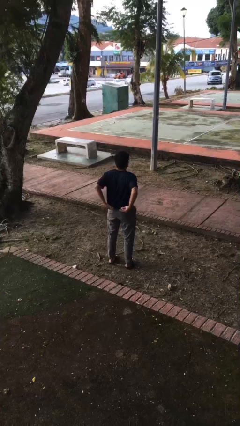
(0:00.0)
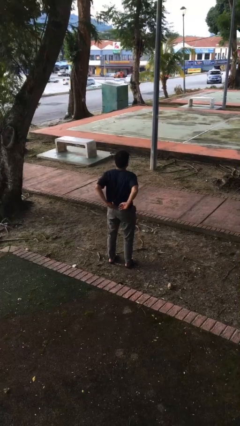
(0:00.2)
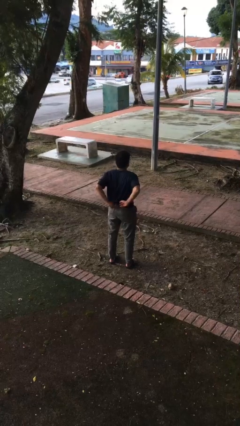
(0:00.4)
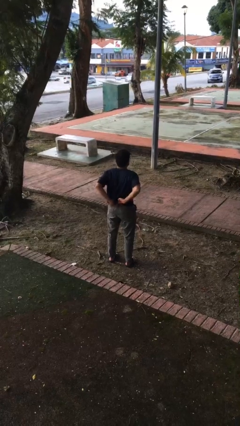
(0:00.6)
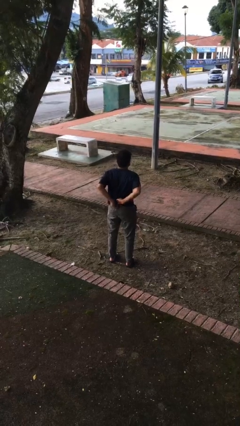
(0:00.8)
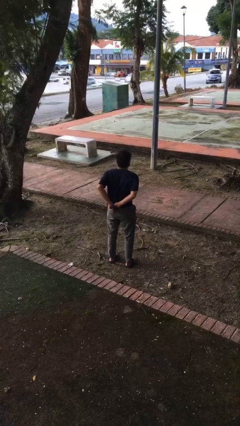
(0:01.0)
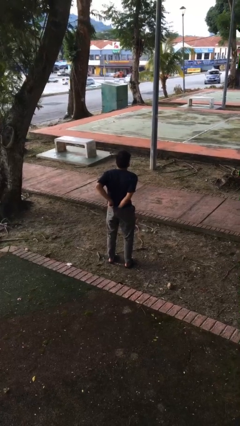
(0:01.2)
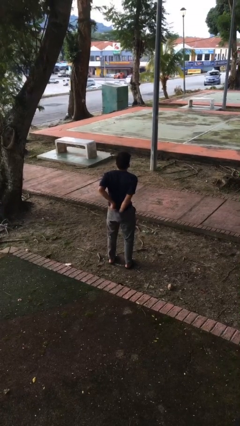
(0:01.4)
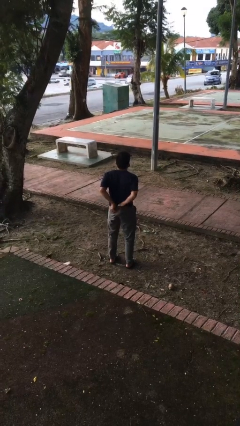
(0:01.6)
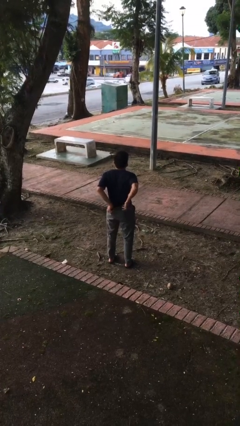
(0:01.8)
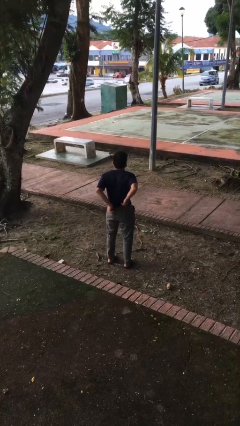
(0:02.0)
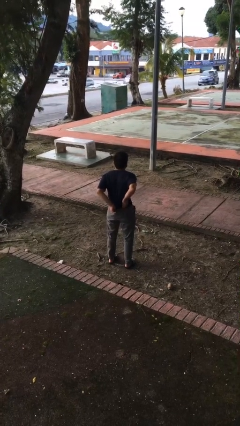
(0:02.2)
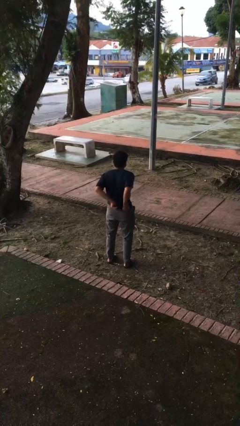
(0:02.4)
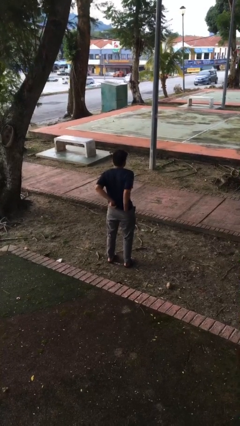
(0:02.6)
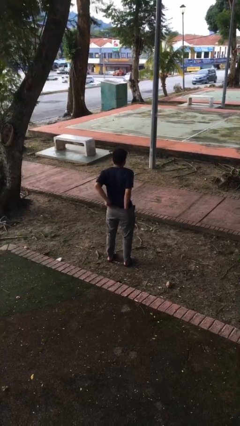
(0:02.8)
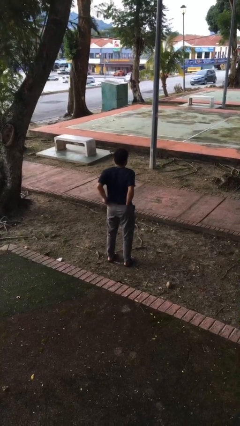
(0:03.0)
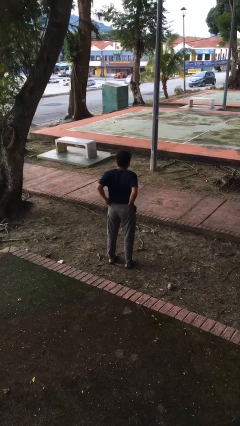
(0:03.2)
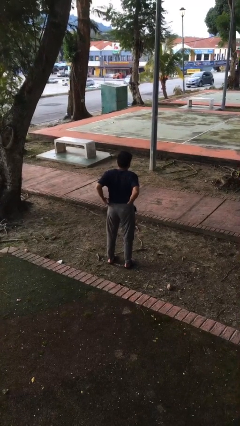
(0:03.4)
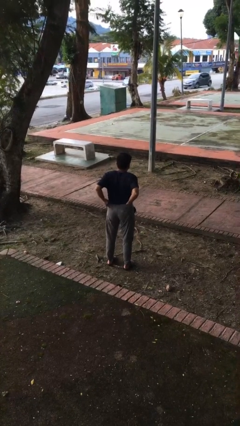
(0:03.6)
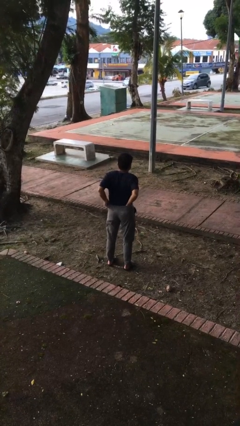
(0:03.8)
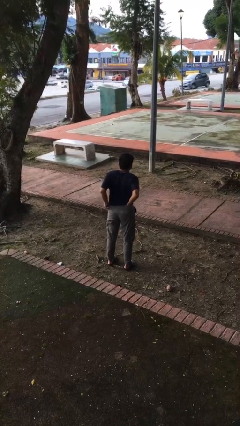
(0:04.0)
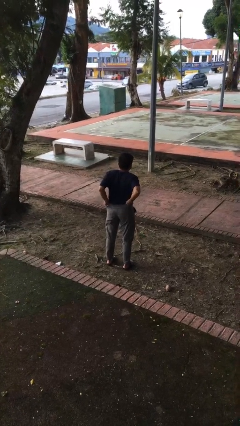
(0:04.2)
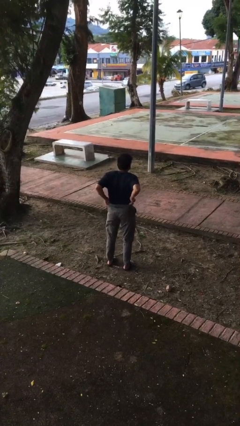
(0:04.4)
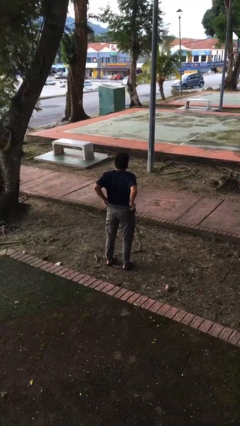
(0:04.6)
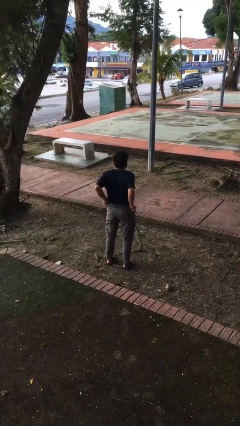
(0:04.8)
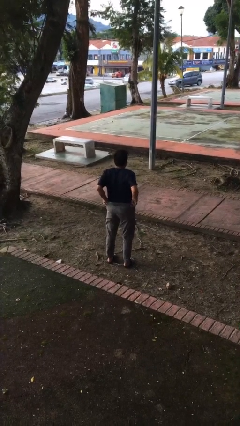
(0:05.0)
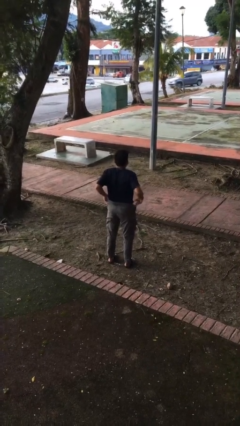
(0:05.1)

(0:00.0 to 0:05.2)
person tucks in shirt

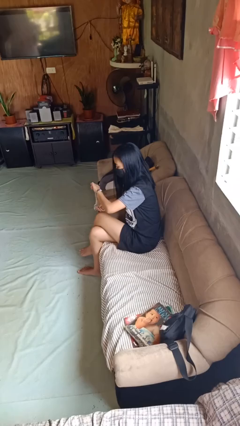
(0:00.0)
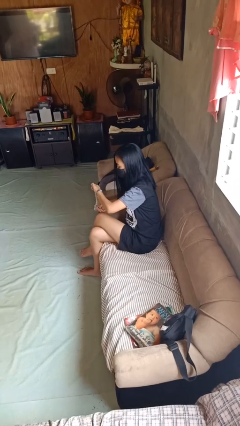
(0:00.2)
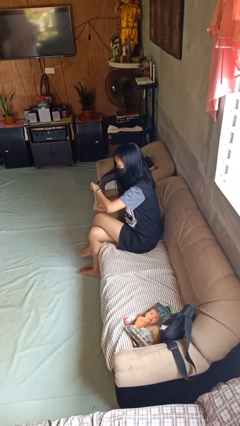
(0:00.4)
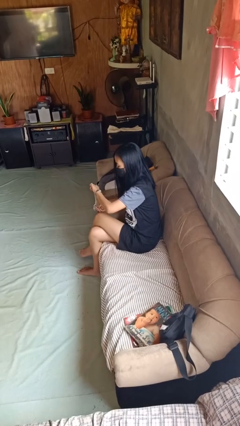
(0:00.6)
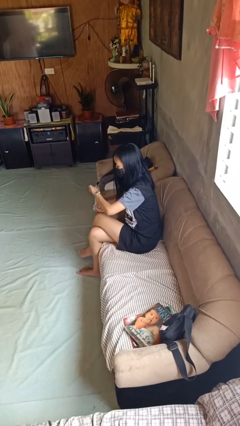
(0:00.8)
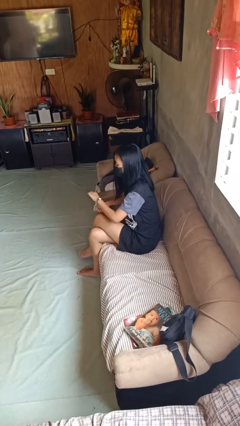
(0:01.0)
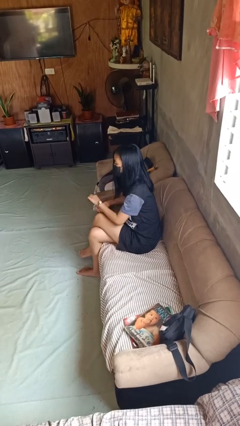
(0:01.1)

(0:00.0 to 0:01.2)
person looks at wristwatch

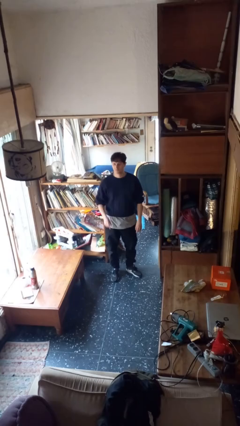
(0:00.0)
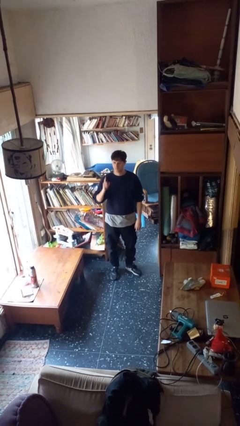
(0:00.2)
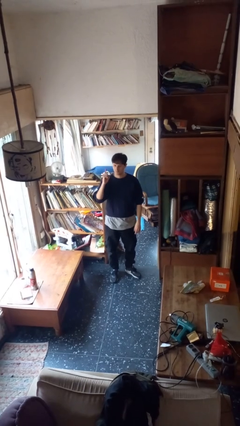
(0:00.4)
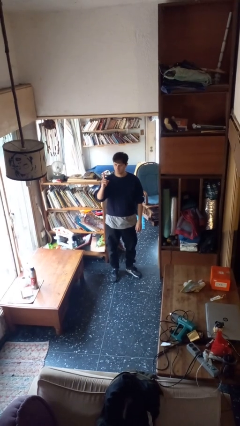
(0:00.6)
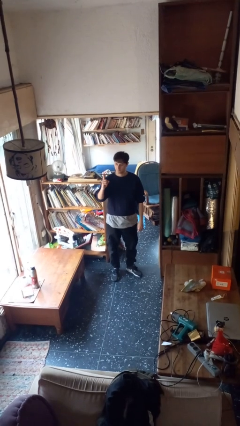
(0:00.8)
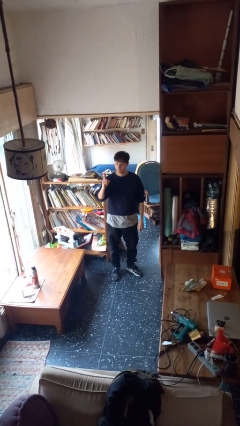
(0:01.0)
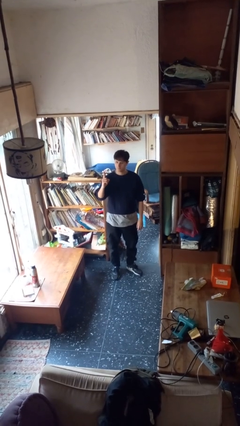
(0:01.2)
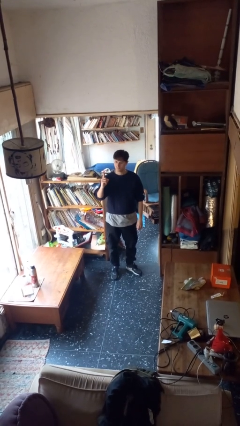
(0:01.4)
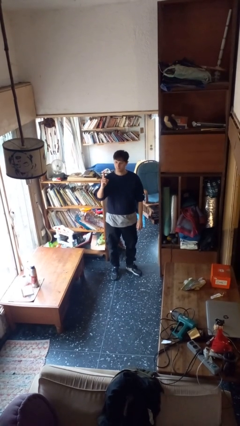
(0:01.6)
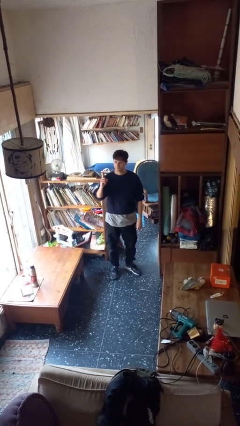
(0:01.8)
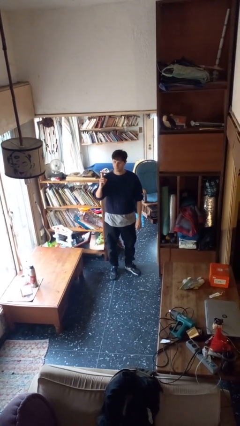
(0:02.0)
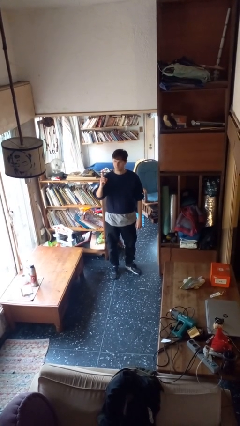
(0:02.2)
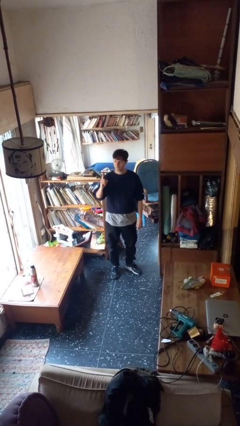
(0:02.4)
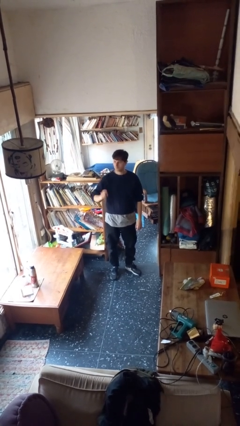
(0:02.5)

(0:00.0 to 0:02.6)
person gestures number one

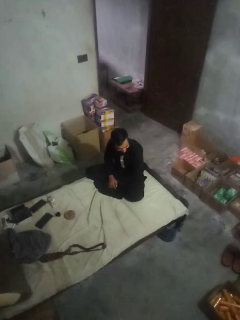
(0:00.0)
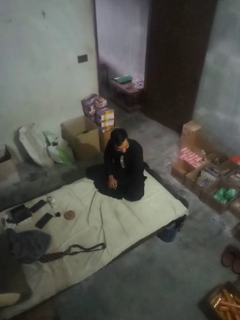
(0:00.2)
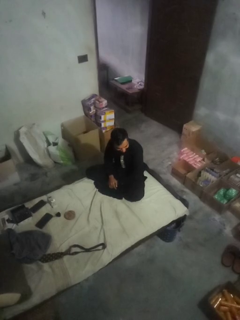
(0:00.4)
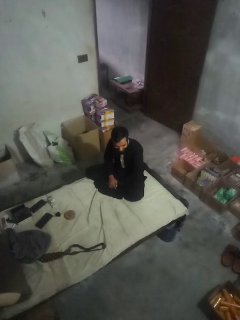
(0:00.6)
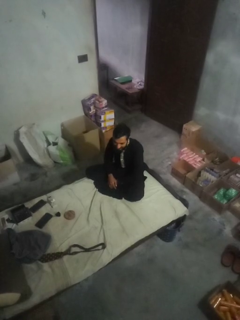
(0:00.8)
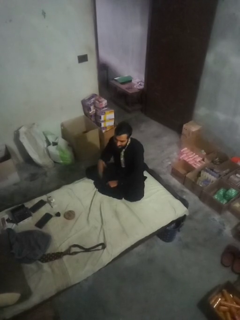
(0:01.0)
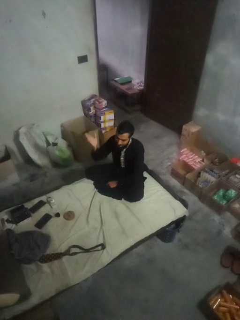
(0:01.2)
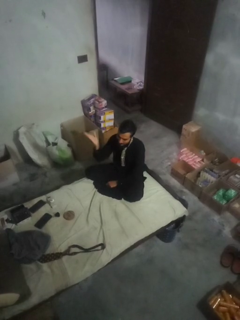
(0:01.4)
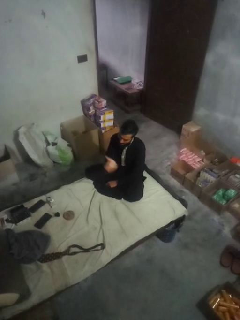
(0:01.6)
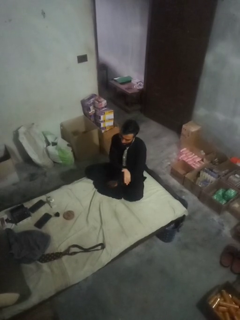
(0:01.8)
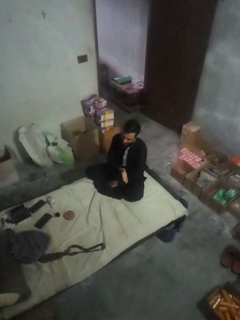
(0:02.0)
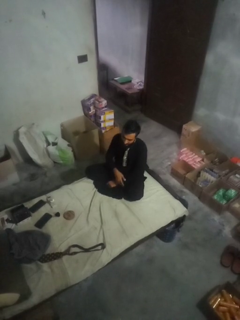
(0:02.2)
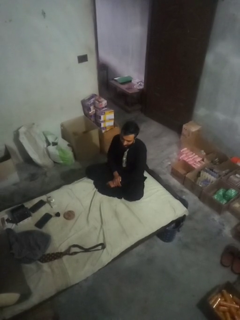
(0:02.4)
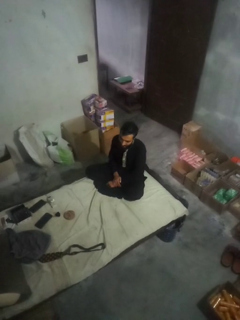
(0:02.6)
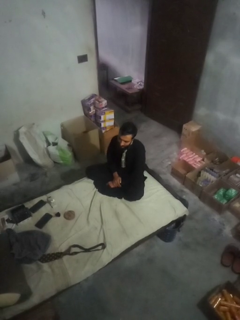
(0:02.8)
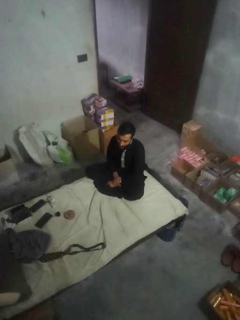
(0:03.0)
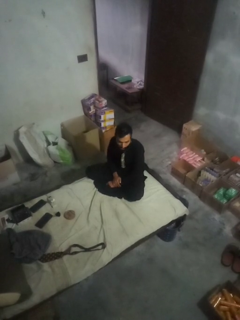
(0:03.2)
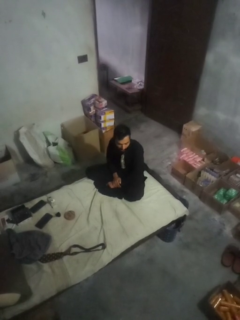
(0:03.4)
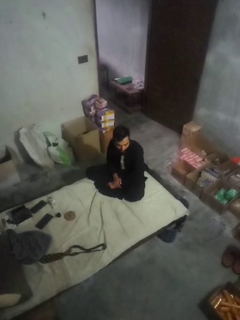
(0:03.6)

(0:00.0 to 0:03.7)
person gestures cut

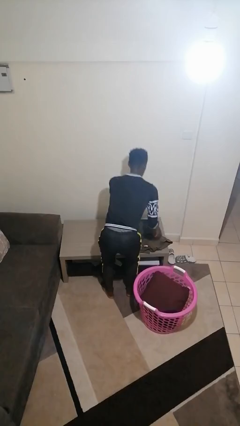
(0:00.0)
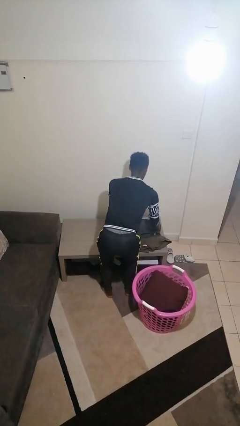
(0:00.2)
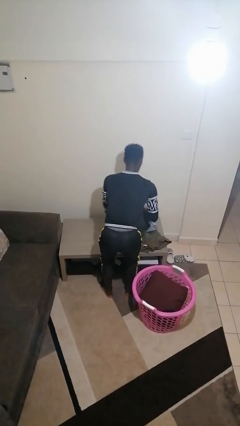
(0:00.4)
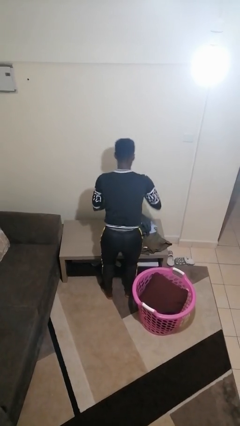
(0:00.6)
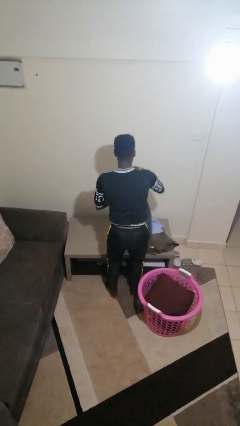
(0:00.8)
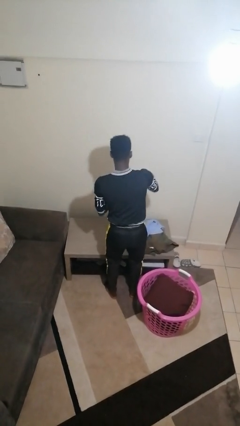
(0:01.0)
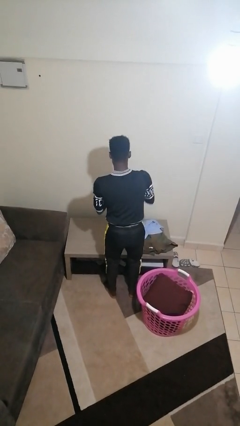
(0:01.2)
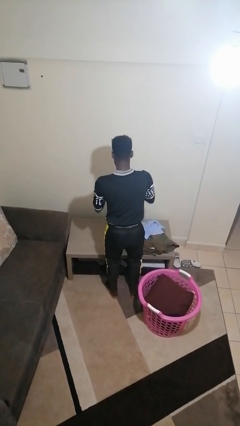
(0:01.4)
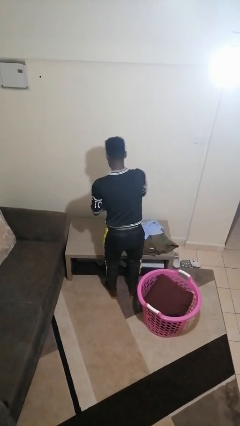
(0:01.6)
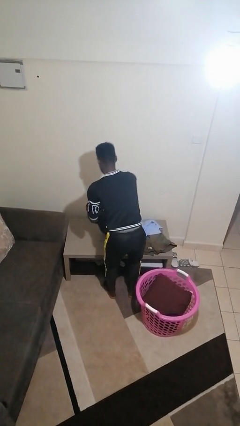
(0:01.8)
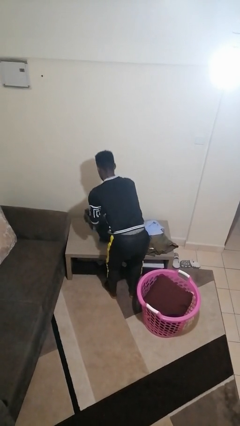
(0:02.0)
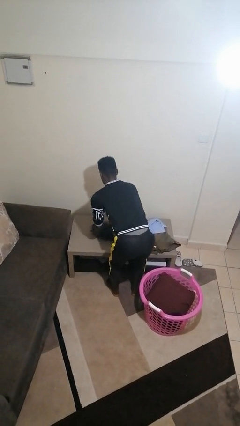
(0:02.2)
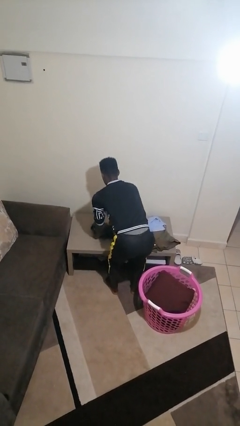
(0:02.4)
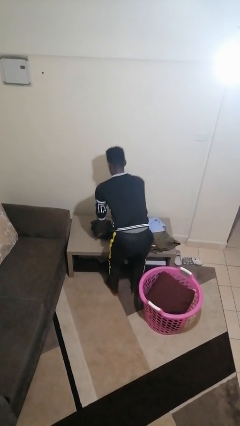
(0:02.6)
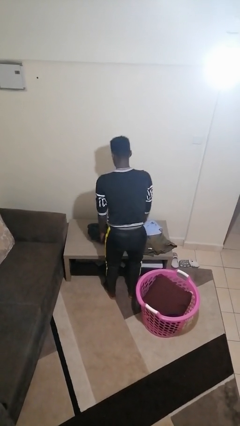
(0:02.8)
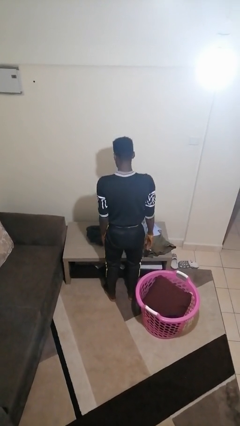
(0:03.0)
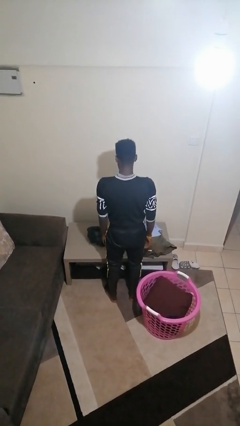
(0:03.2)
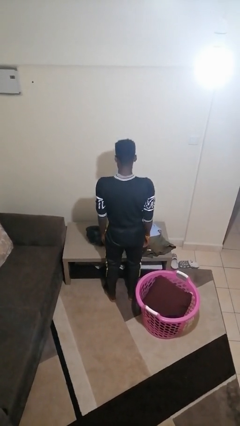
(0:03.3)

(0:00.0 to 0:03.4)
person folds pants

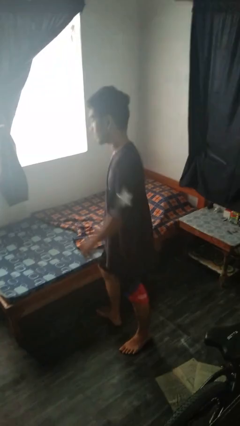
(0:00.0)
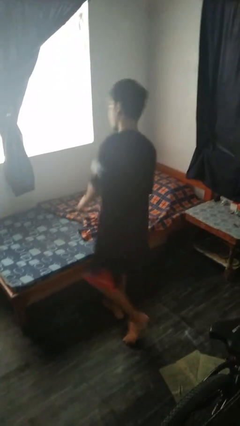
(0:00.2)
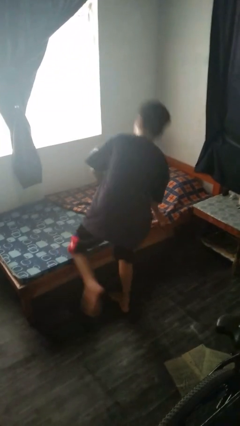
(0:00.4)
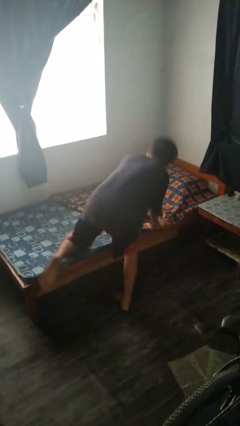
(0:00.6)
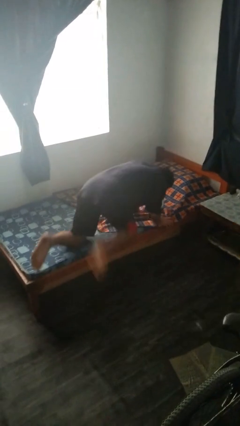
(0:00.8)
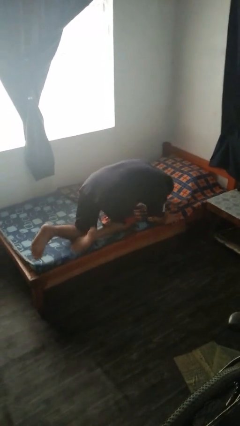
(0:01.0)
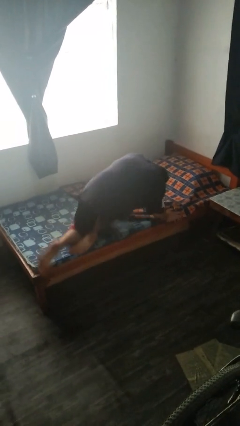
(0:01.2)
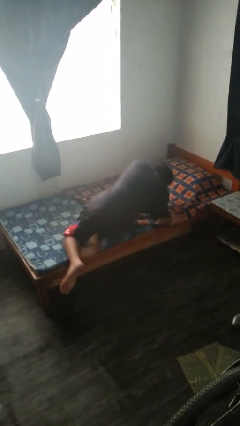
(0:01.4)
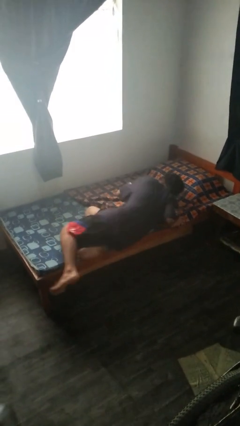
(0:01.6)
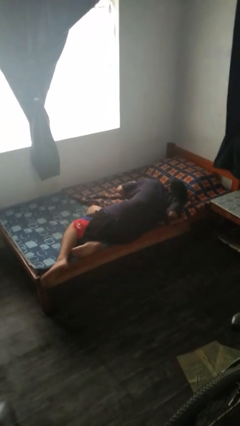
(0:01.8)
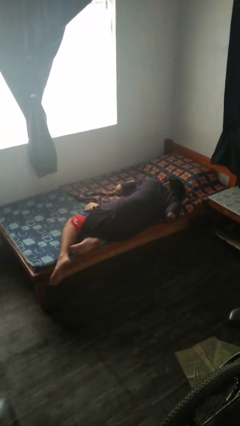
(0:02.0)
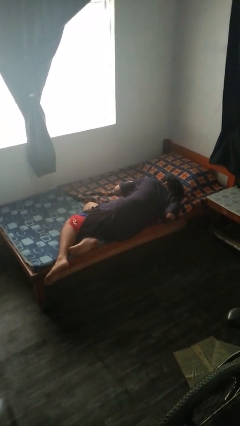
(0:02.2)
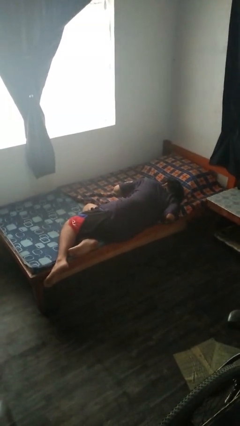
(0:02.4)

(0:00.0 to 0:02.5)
person lies down on bed

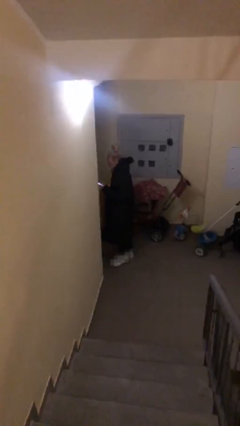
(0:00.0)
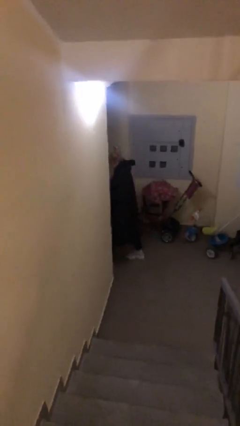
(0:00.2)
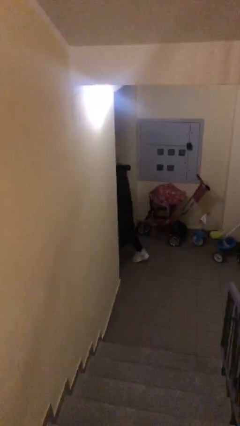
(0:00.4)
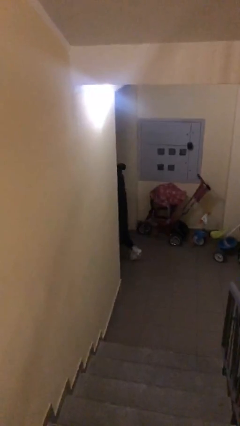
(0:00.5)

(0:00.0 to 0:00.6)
person exits scene through structure
